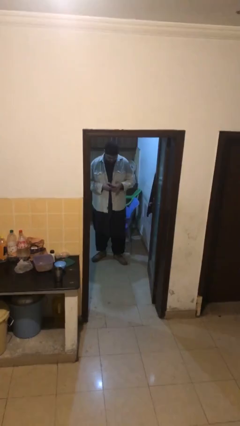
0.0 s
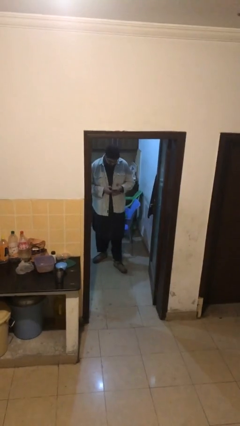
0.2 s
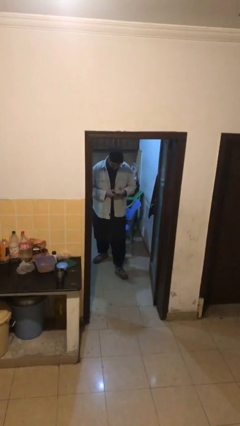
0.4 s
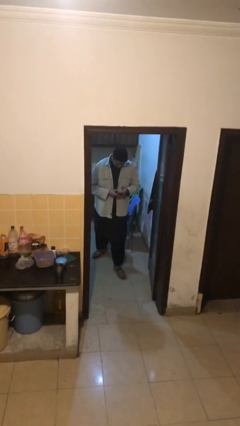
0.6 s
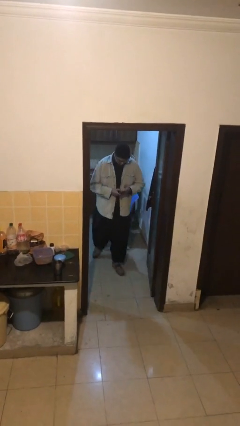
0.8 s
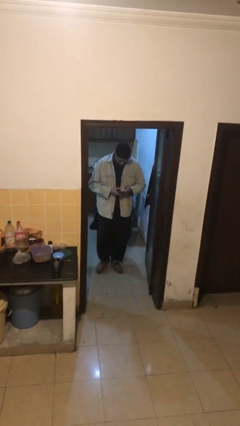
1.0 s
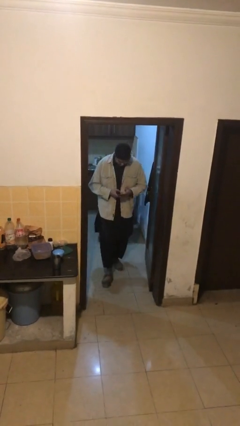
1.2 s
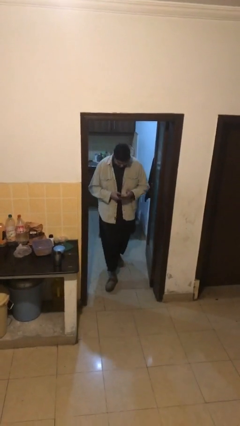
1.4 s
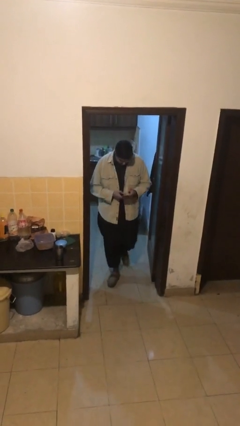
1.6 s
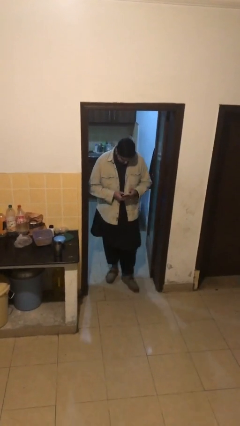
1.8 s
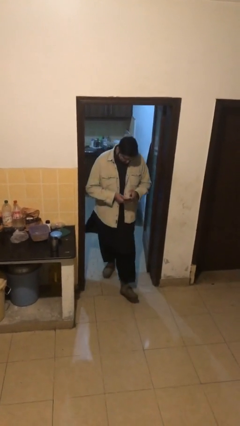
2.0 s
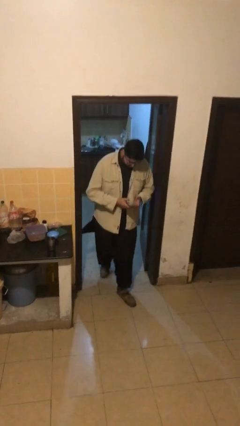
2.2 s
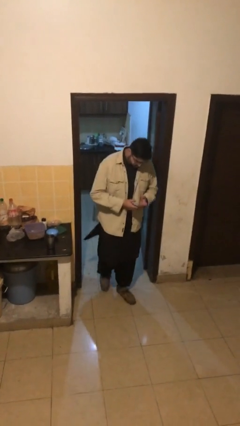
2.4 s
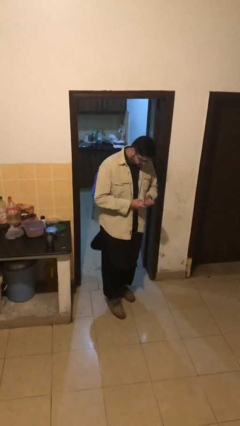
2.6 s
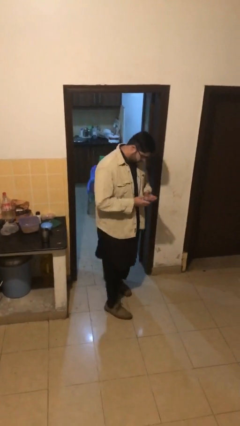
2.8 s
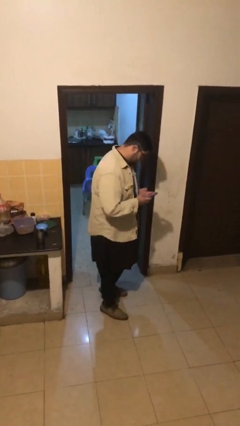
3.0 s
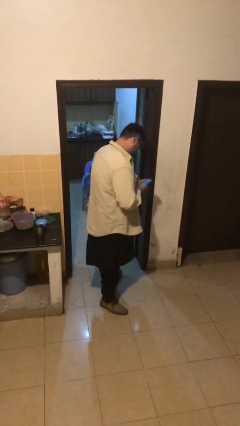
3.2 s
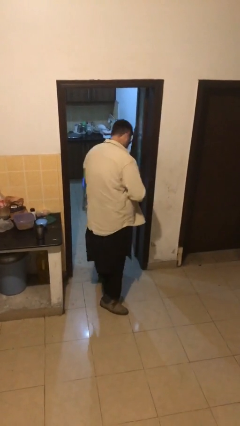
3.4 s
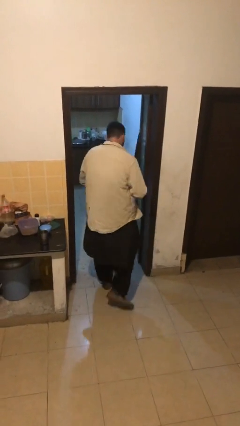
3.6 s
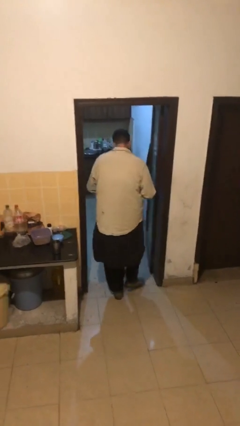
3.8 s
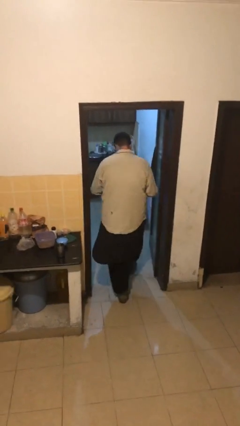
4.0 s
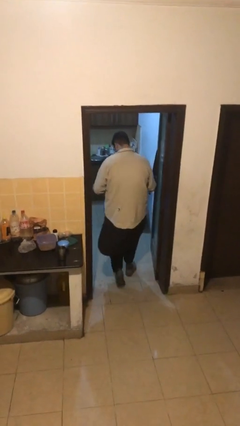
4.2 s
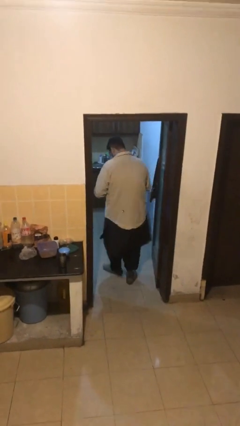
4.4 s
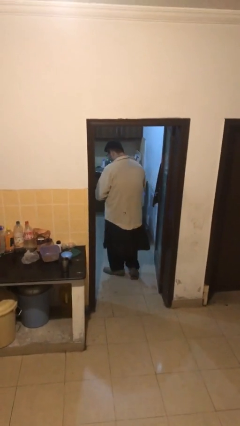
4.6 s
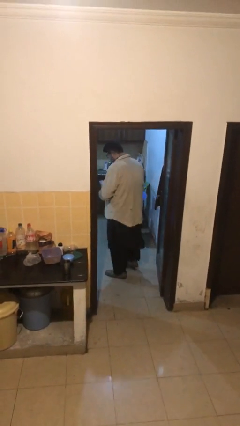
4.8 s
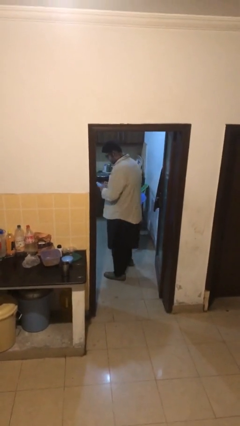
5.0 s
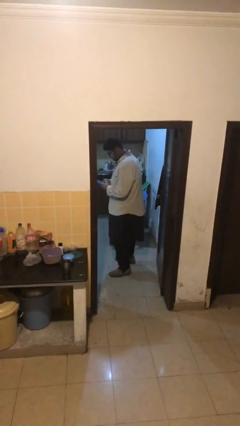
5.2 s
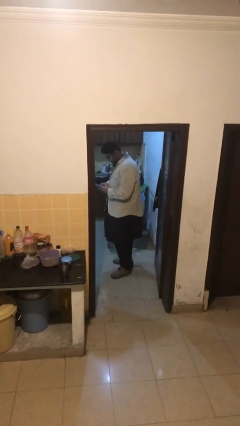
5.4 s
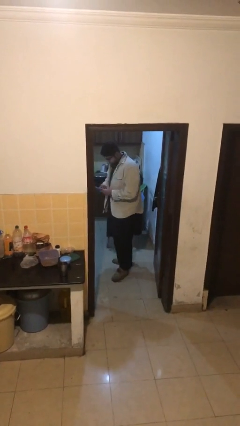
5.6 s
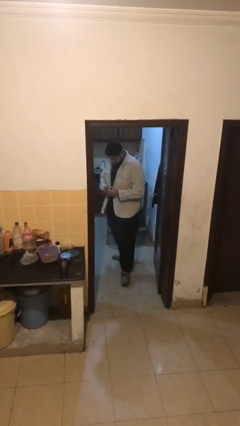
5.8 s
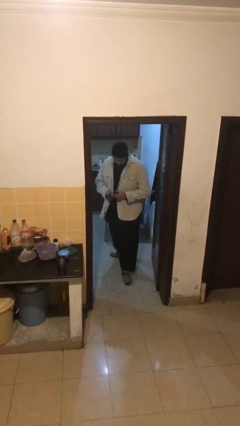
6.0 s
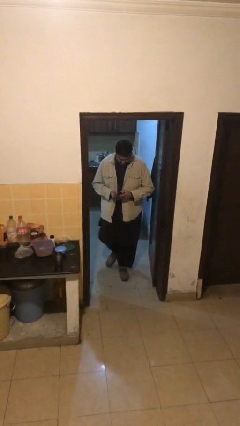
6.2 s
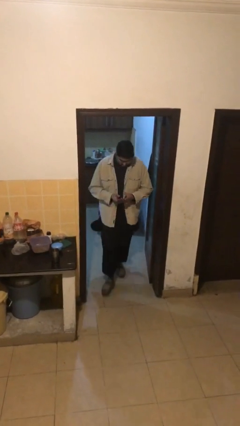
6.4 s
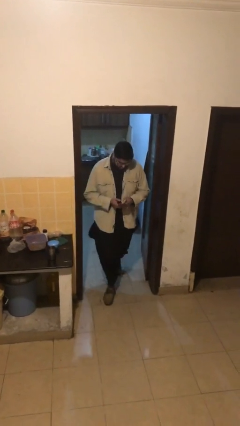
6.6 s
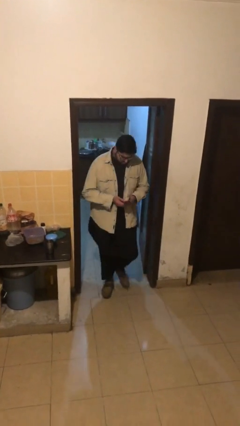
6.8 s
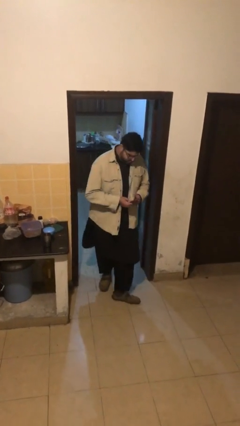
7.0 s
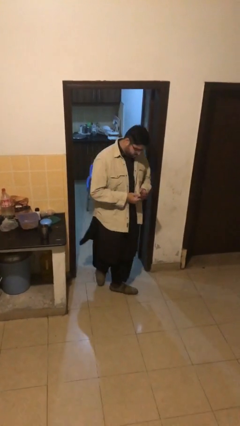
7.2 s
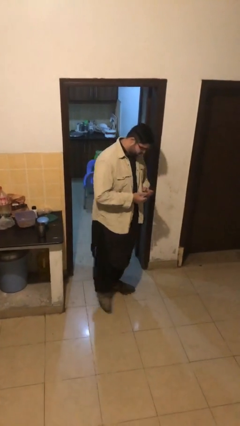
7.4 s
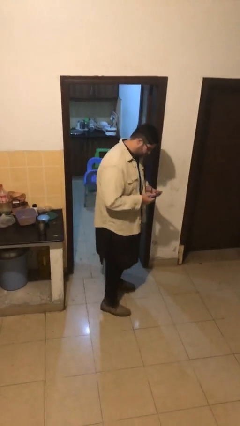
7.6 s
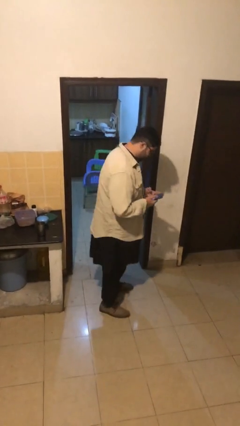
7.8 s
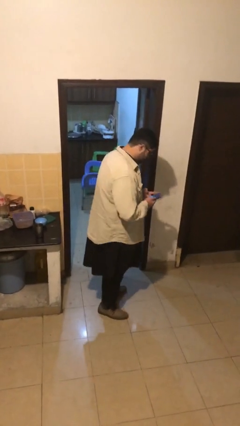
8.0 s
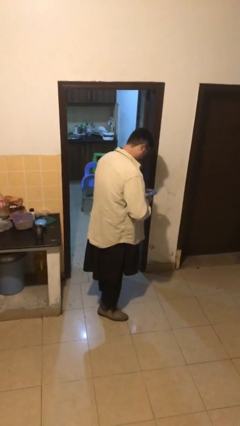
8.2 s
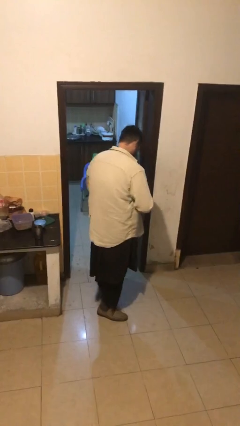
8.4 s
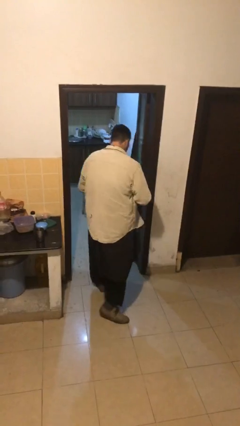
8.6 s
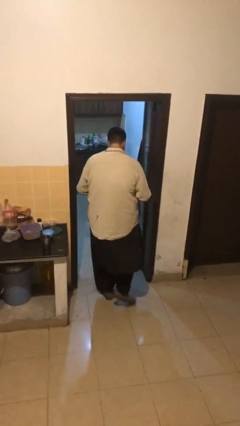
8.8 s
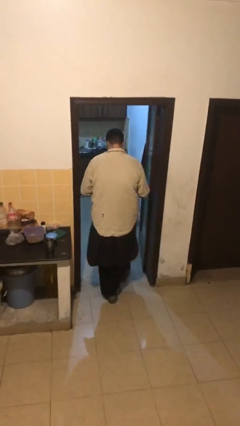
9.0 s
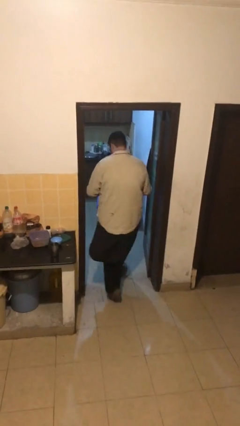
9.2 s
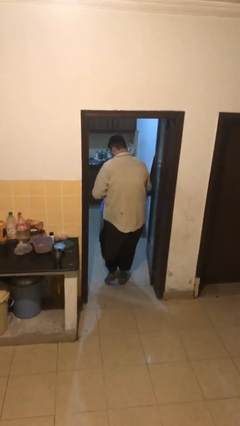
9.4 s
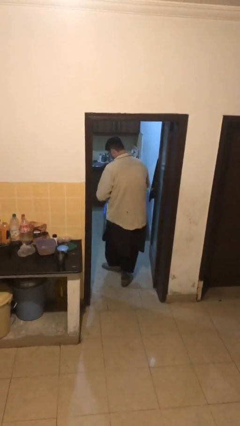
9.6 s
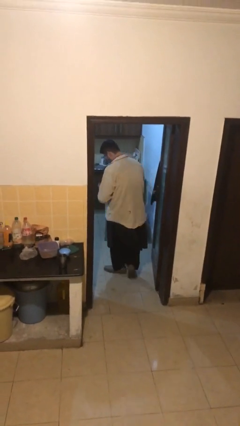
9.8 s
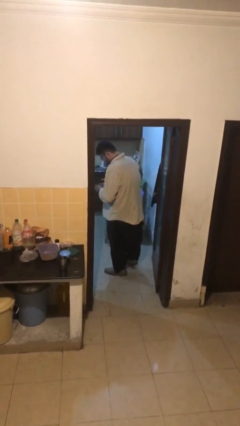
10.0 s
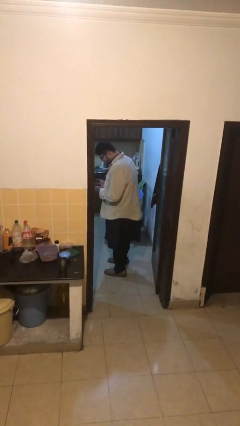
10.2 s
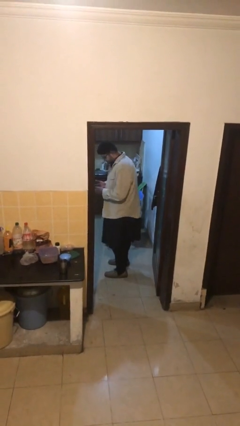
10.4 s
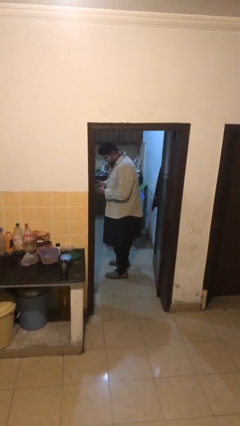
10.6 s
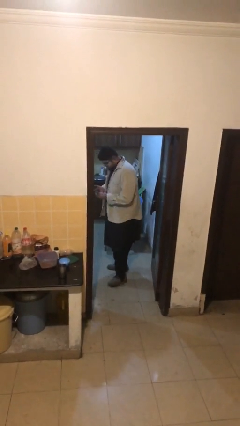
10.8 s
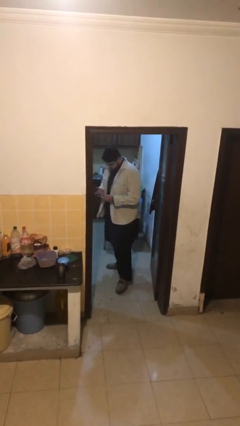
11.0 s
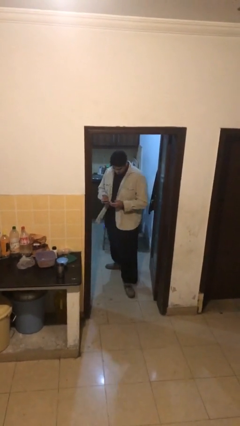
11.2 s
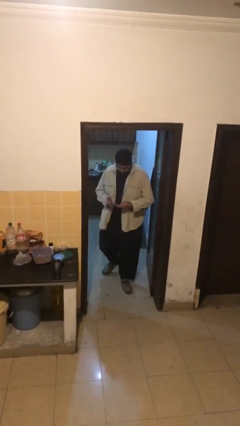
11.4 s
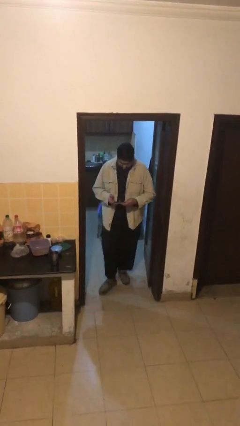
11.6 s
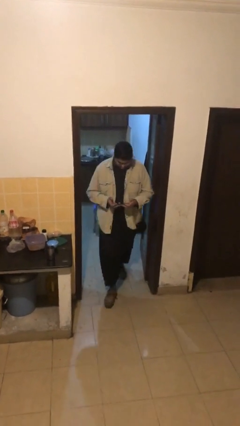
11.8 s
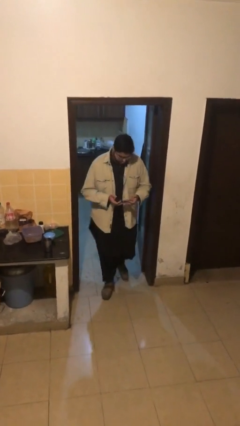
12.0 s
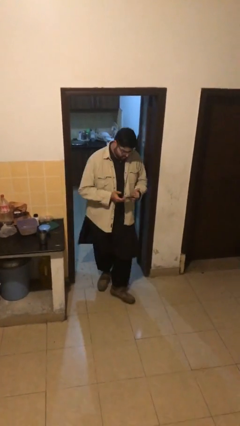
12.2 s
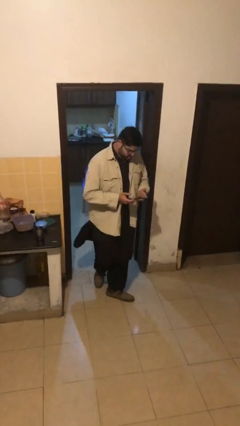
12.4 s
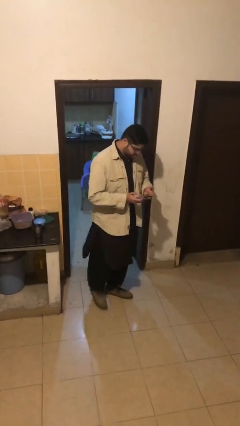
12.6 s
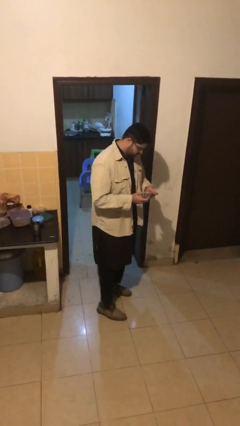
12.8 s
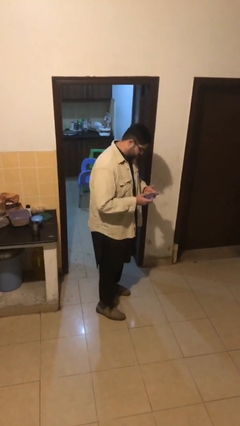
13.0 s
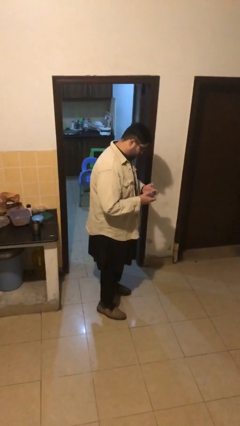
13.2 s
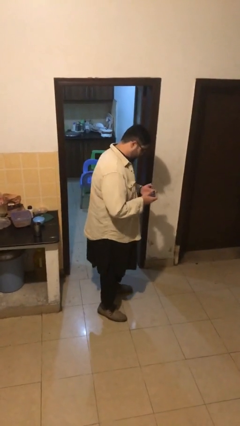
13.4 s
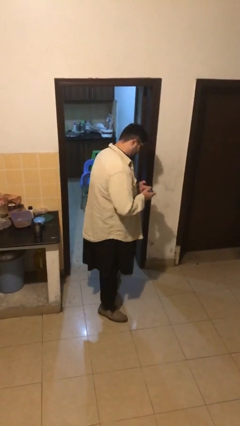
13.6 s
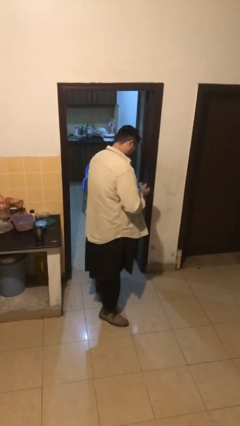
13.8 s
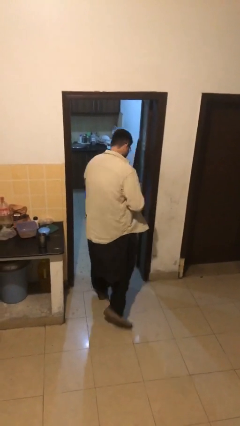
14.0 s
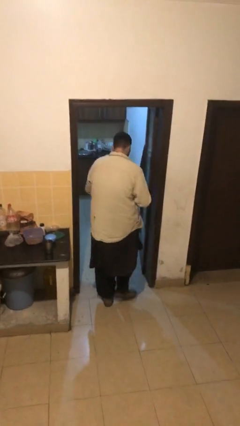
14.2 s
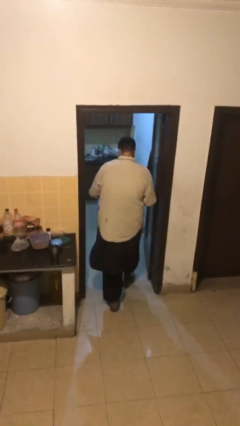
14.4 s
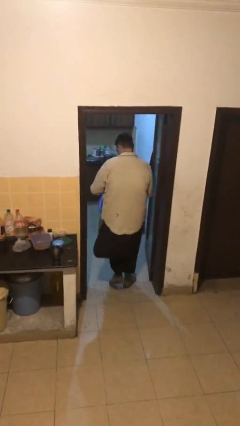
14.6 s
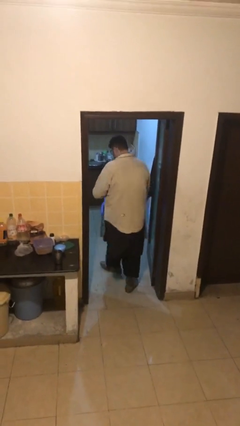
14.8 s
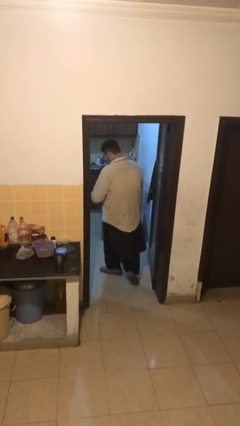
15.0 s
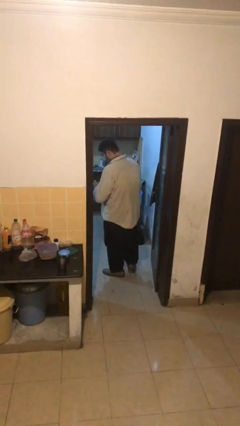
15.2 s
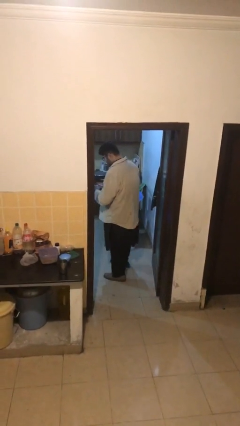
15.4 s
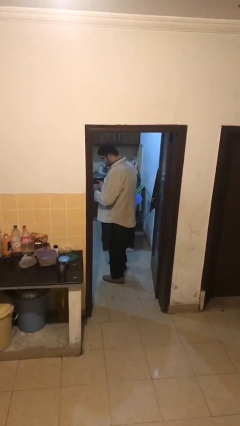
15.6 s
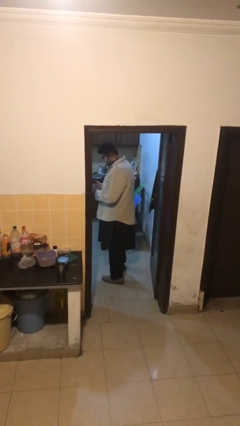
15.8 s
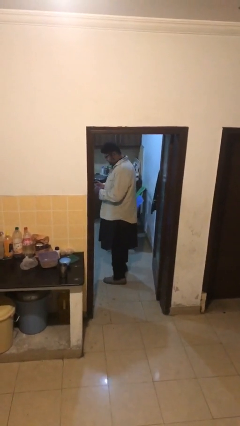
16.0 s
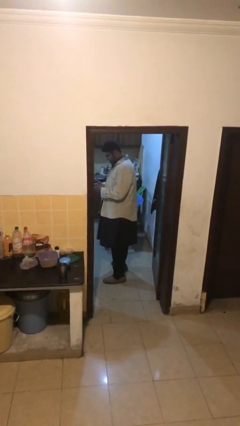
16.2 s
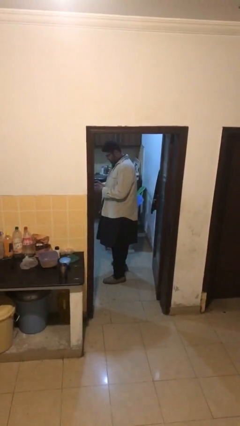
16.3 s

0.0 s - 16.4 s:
person texts on phone

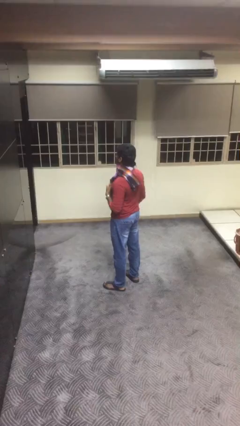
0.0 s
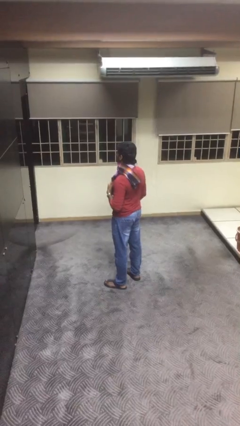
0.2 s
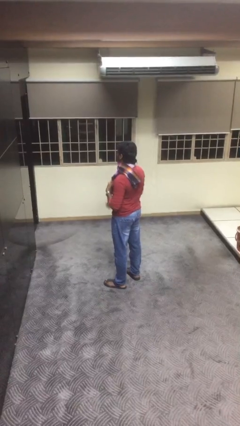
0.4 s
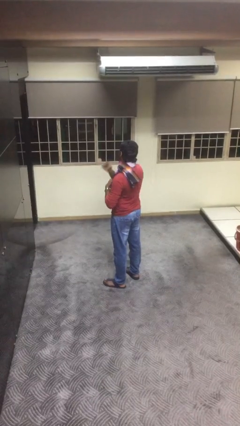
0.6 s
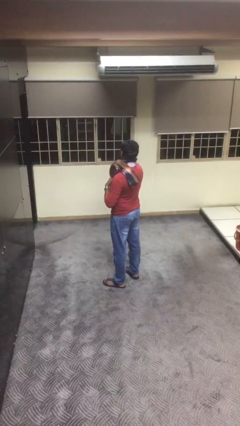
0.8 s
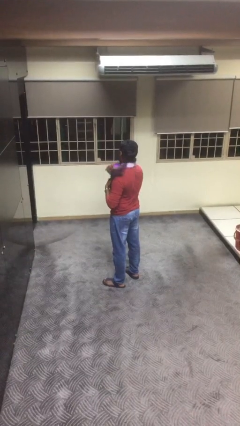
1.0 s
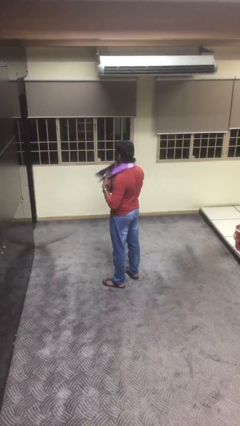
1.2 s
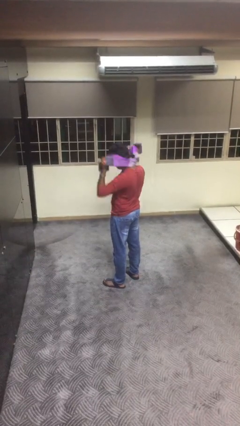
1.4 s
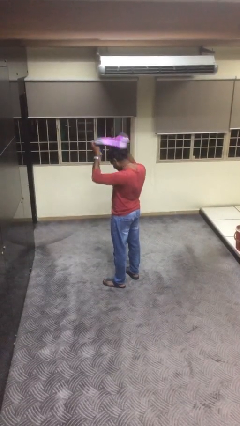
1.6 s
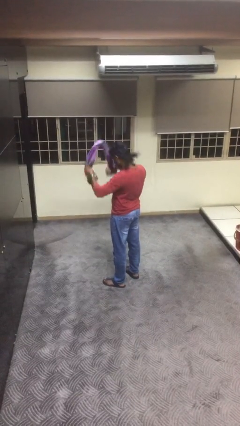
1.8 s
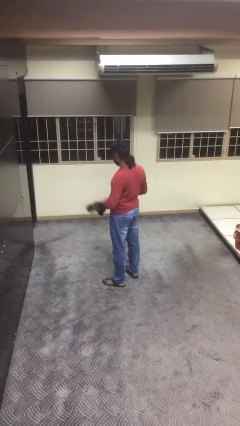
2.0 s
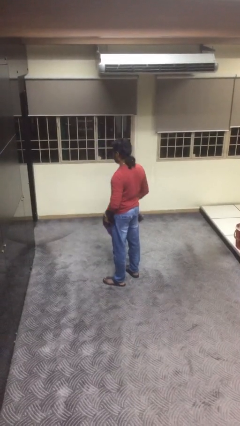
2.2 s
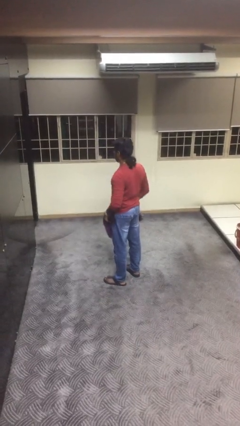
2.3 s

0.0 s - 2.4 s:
person takes off scarf
